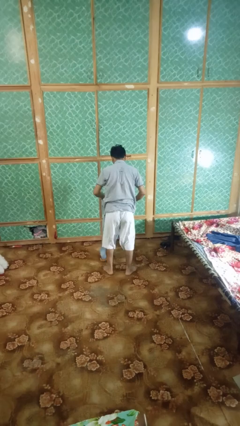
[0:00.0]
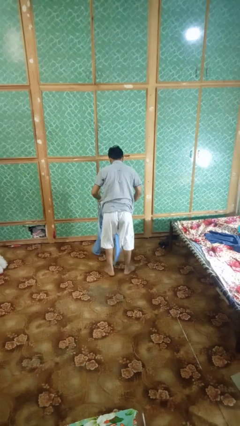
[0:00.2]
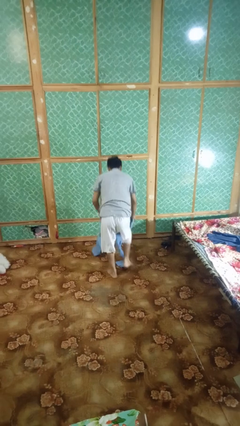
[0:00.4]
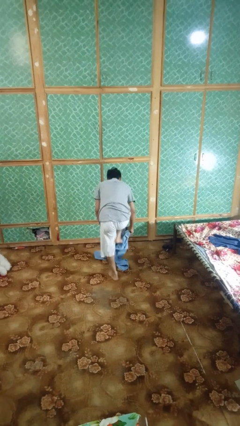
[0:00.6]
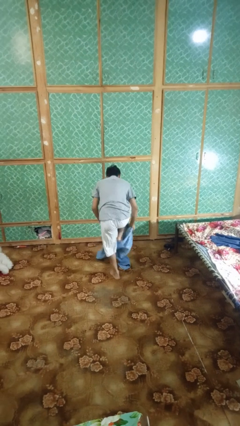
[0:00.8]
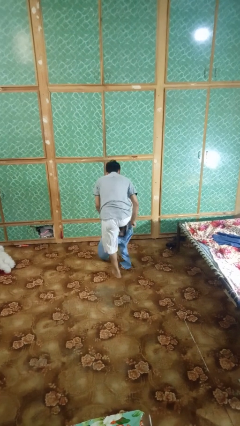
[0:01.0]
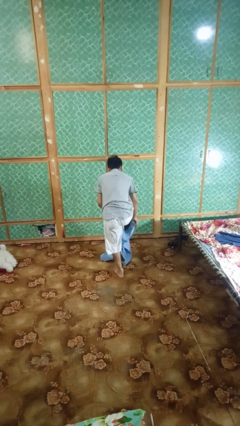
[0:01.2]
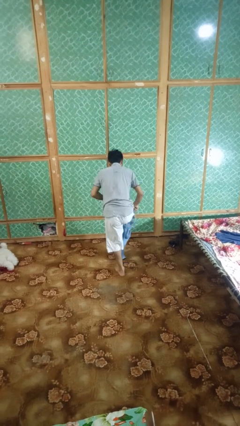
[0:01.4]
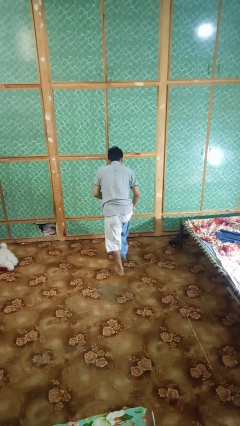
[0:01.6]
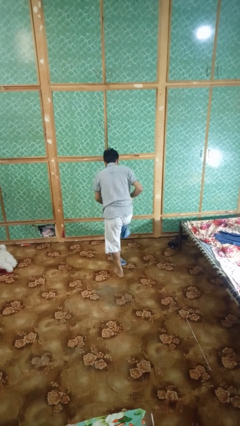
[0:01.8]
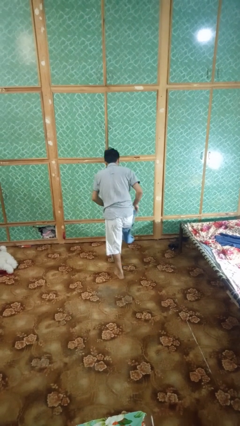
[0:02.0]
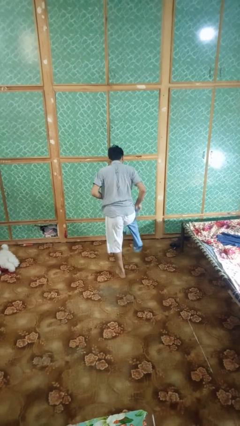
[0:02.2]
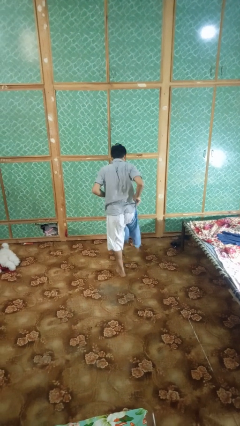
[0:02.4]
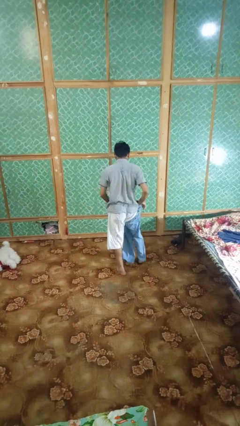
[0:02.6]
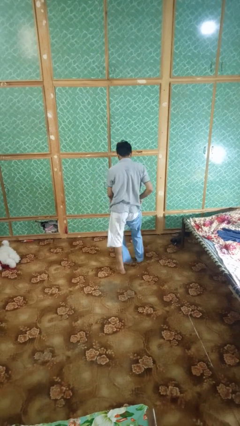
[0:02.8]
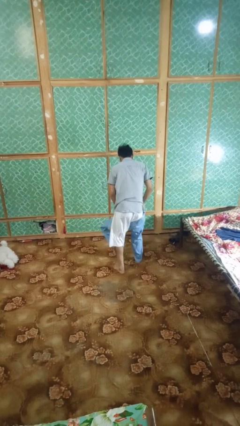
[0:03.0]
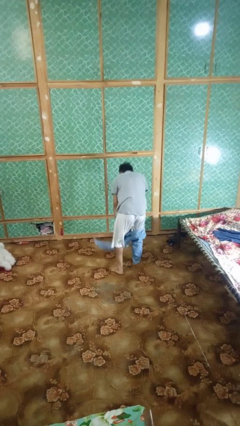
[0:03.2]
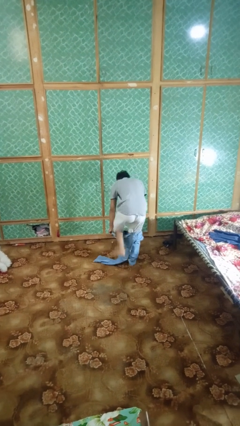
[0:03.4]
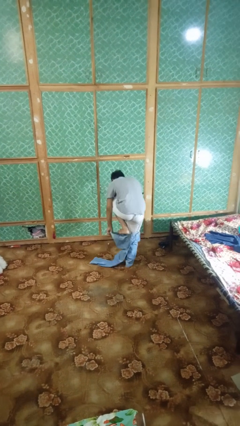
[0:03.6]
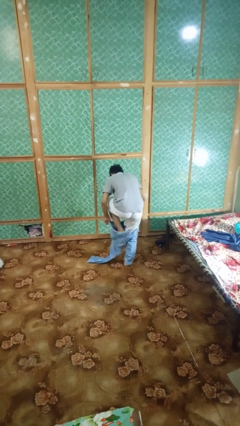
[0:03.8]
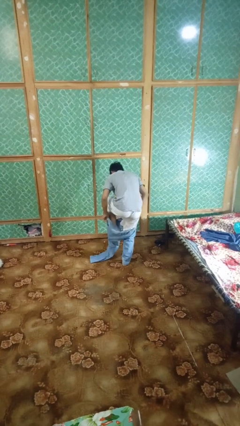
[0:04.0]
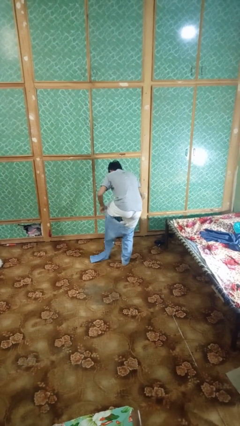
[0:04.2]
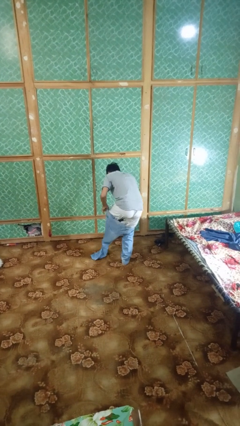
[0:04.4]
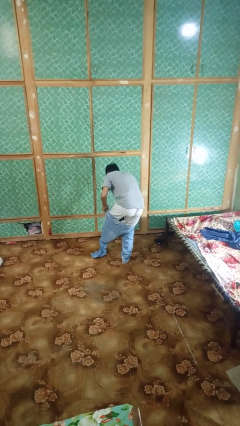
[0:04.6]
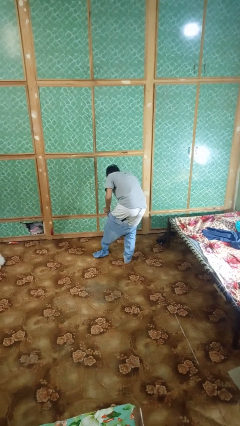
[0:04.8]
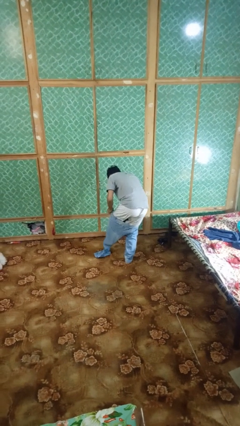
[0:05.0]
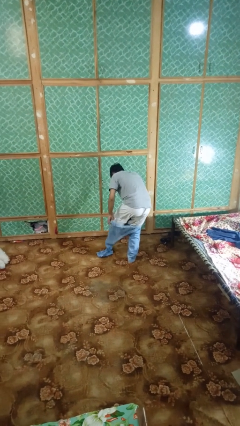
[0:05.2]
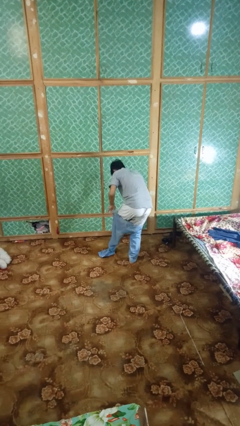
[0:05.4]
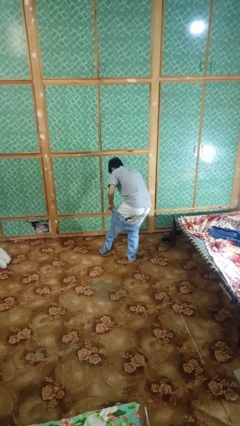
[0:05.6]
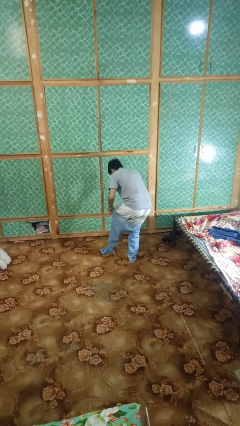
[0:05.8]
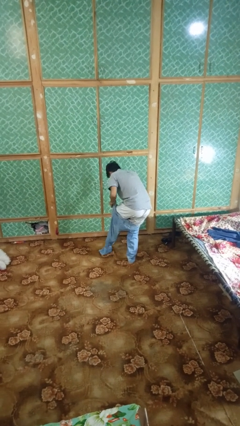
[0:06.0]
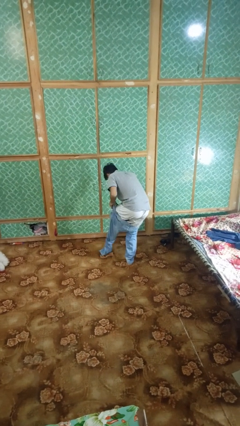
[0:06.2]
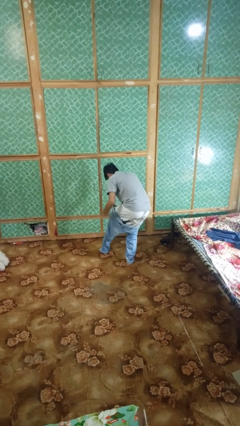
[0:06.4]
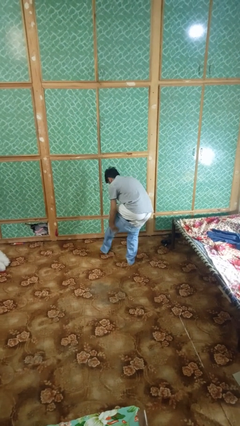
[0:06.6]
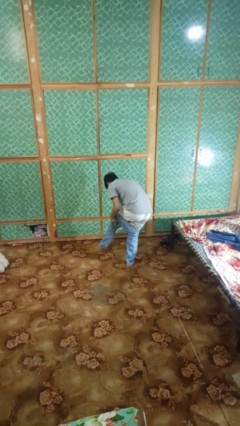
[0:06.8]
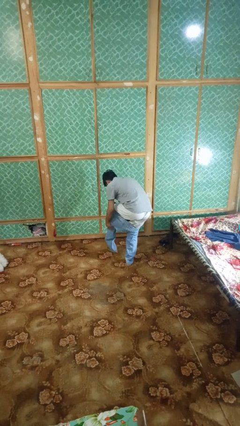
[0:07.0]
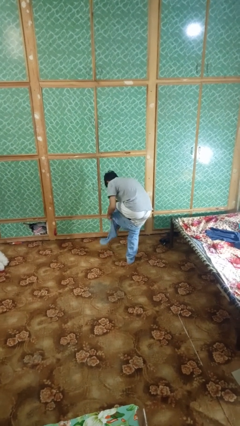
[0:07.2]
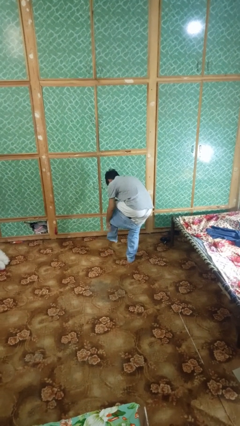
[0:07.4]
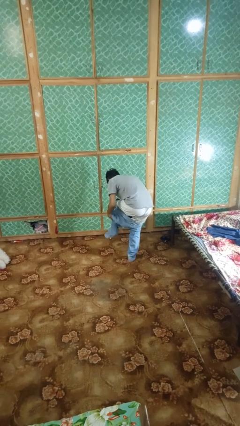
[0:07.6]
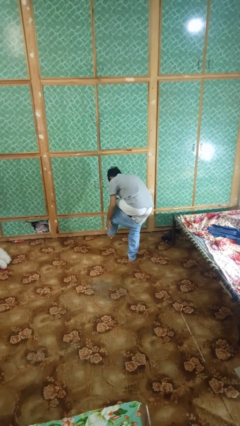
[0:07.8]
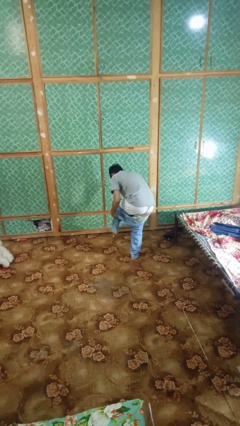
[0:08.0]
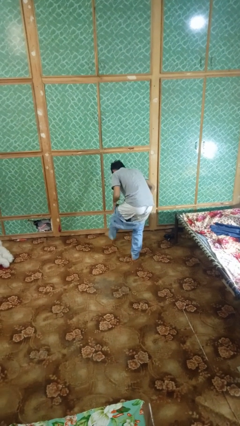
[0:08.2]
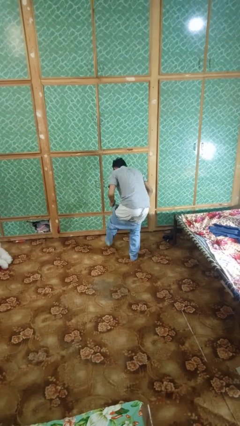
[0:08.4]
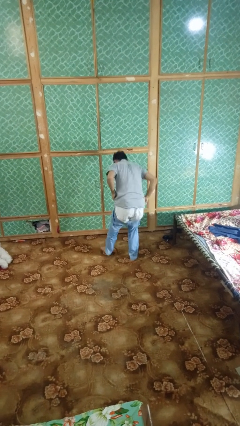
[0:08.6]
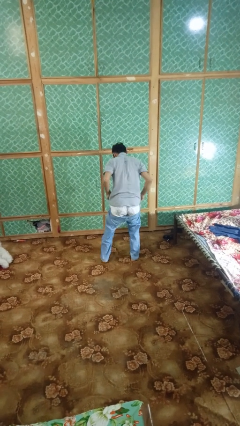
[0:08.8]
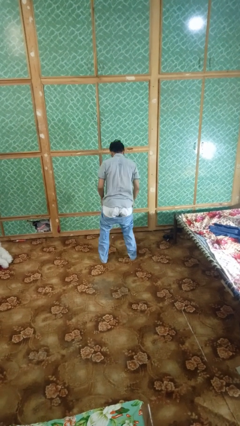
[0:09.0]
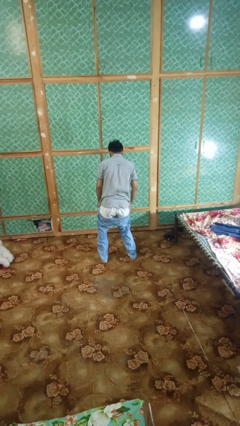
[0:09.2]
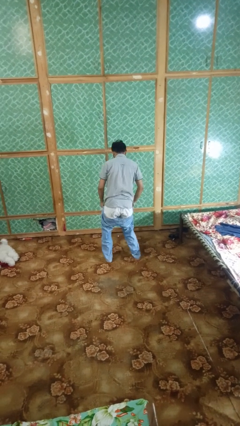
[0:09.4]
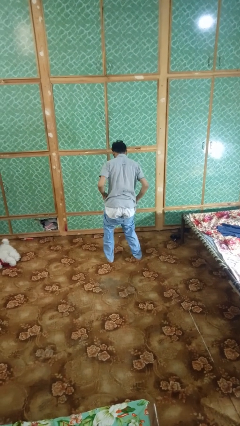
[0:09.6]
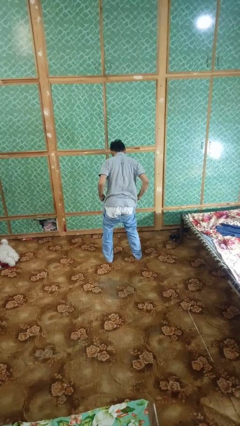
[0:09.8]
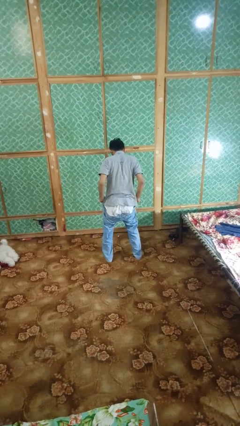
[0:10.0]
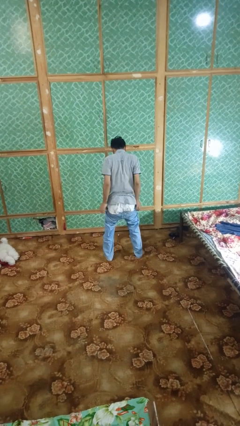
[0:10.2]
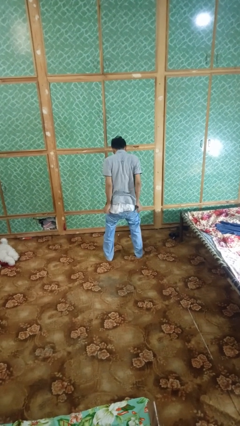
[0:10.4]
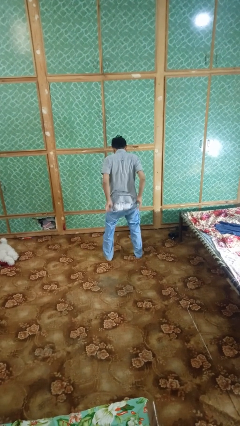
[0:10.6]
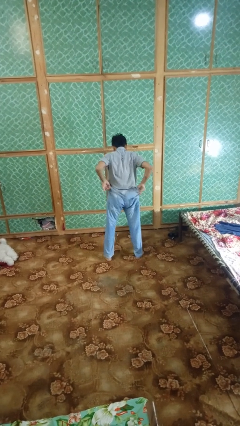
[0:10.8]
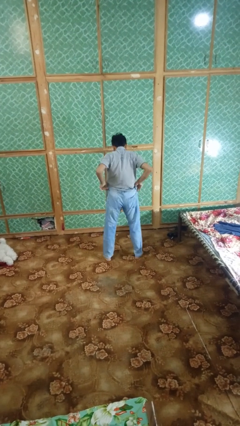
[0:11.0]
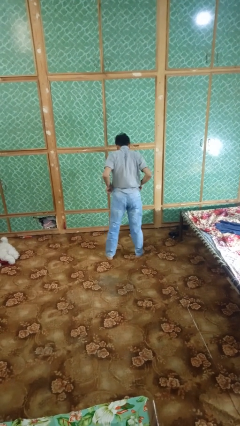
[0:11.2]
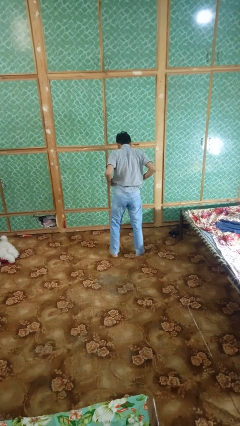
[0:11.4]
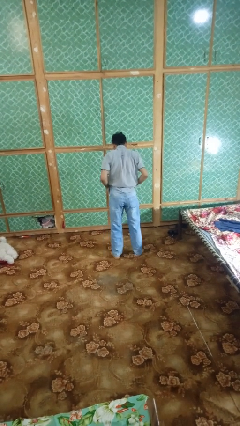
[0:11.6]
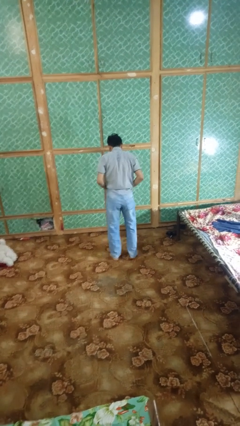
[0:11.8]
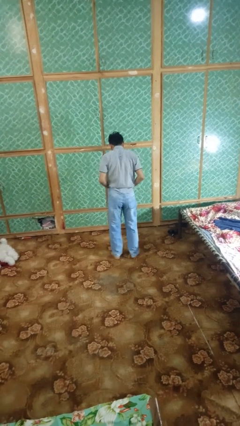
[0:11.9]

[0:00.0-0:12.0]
person puts on pants

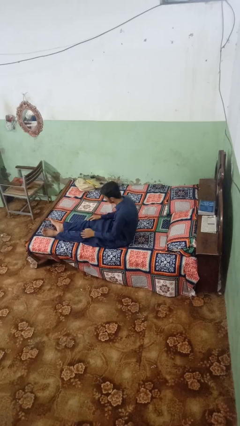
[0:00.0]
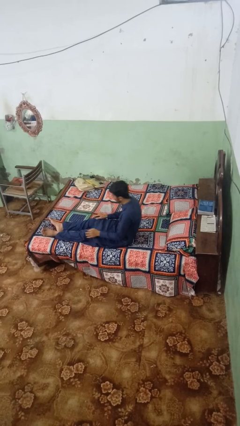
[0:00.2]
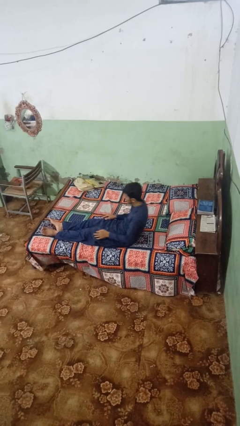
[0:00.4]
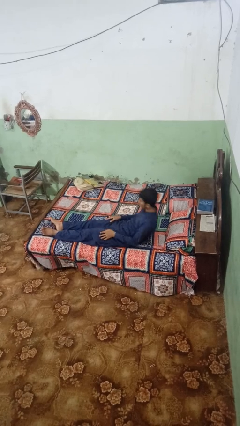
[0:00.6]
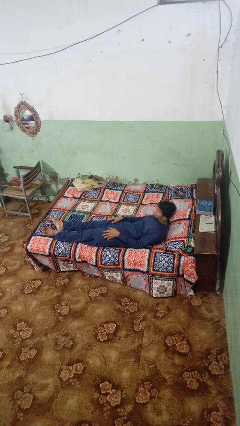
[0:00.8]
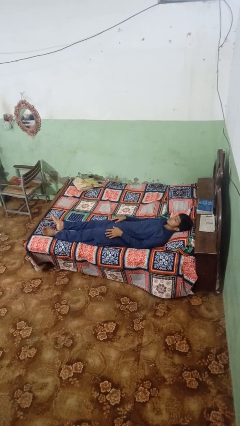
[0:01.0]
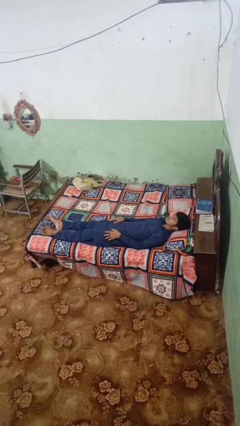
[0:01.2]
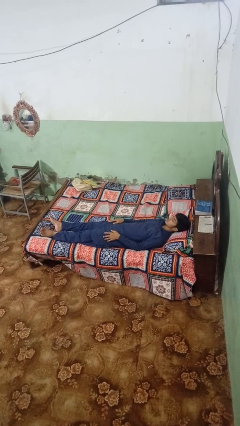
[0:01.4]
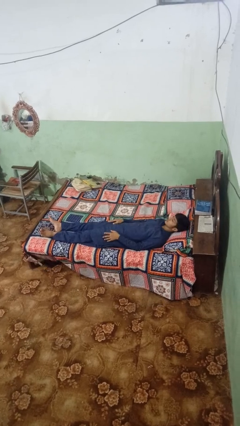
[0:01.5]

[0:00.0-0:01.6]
person lies down on bed

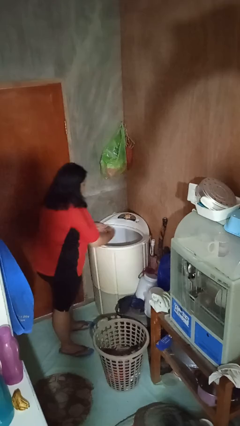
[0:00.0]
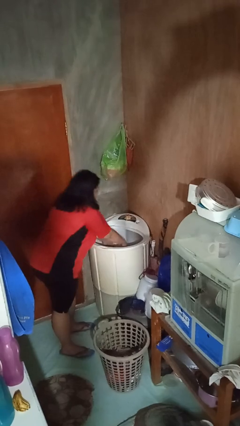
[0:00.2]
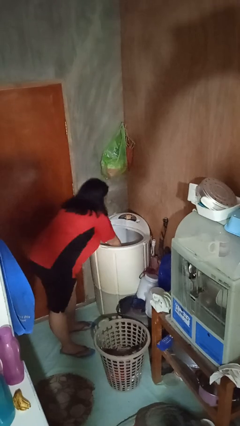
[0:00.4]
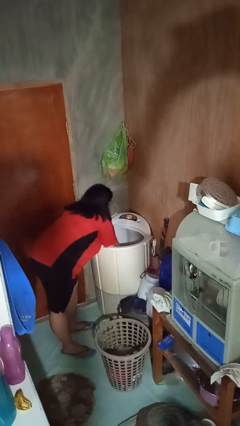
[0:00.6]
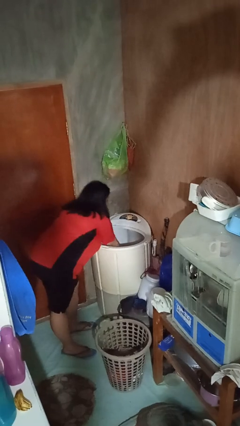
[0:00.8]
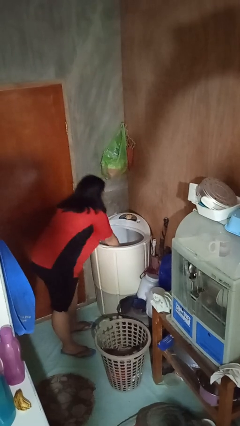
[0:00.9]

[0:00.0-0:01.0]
person loads clotheswasher

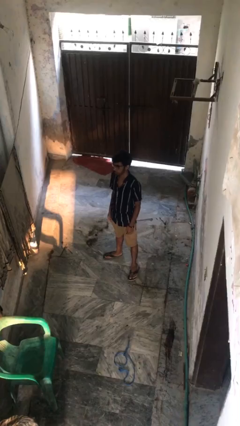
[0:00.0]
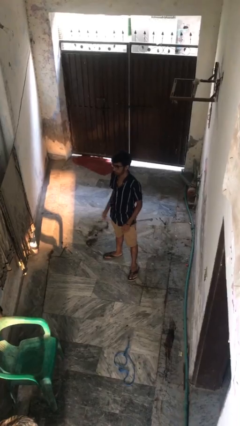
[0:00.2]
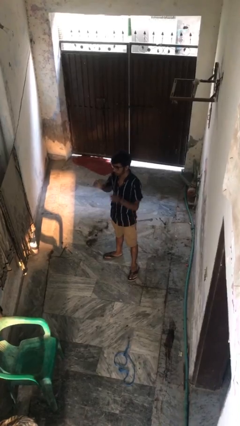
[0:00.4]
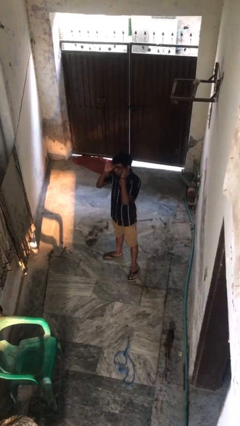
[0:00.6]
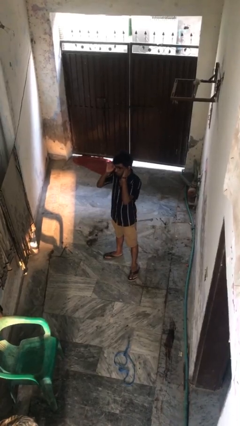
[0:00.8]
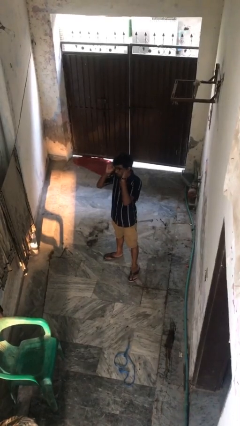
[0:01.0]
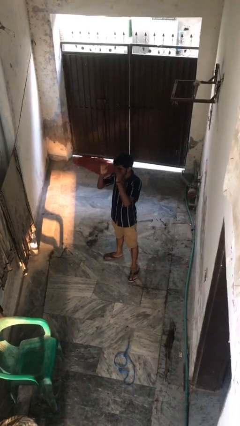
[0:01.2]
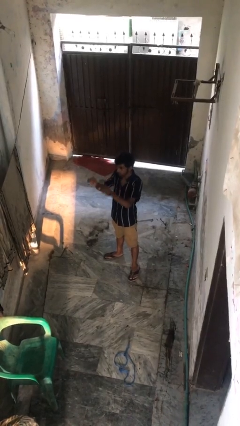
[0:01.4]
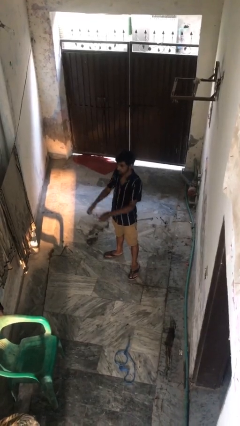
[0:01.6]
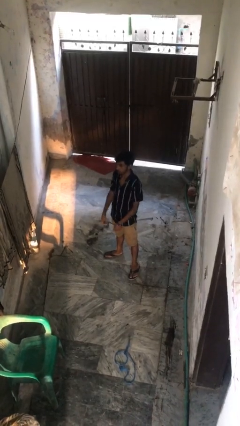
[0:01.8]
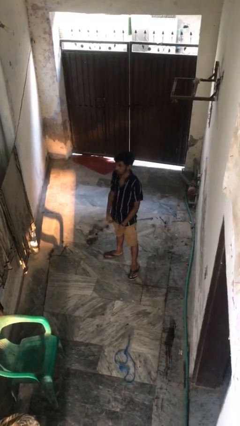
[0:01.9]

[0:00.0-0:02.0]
person takes off glasses

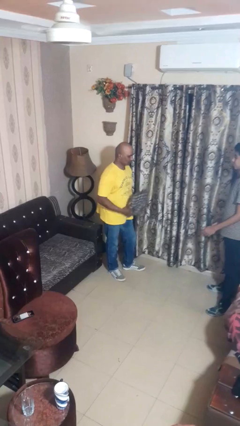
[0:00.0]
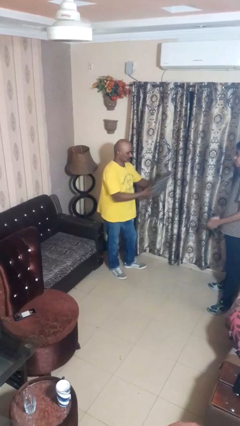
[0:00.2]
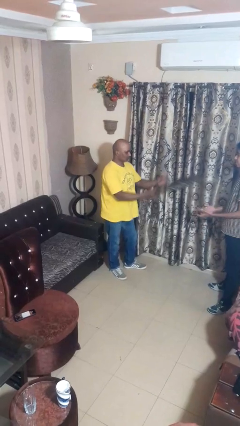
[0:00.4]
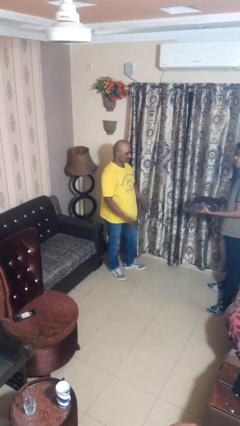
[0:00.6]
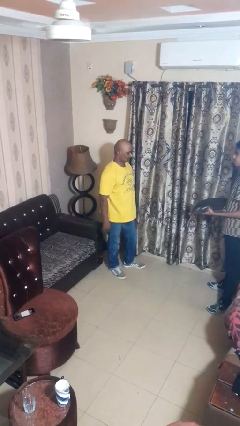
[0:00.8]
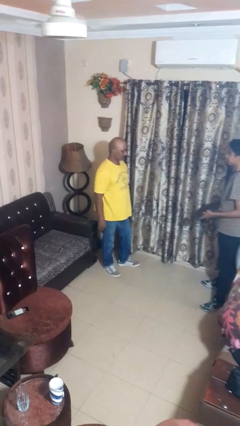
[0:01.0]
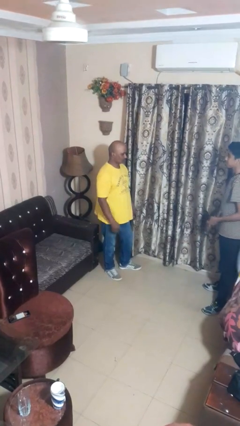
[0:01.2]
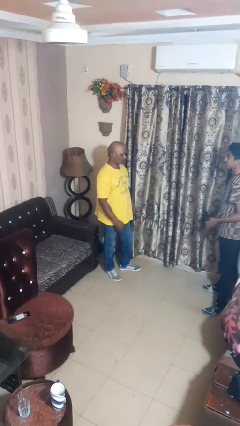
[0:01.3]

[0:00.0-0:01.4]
person throws object to person
